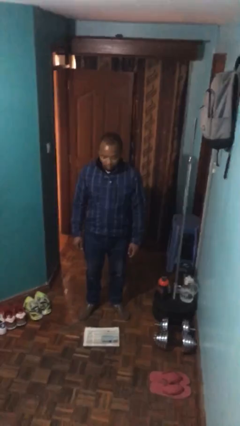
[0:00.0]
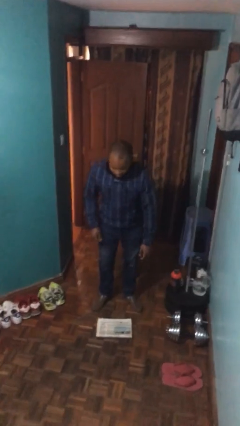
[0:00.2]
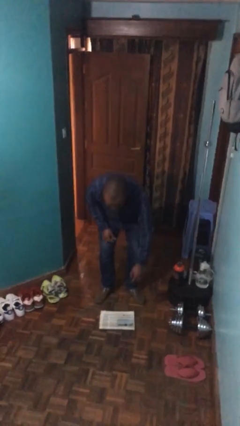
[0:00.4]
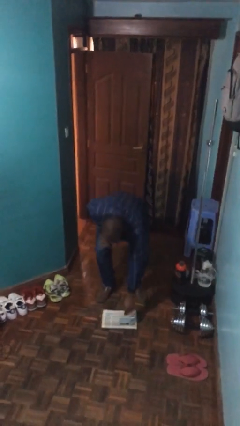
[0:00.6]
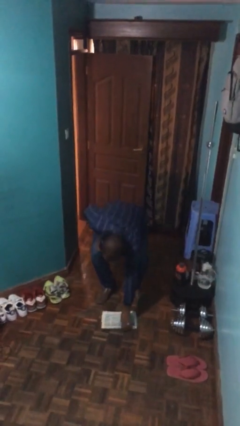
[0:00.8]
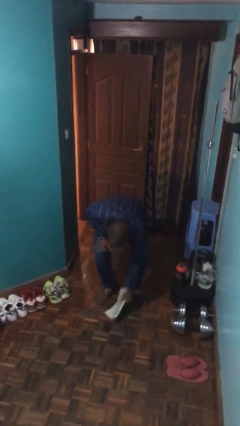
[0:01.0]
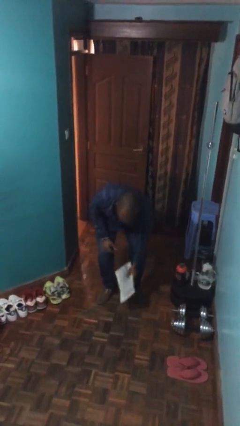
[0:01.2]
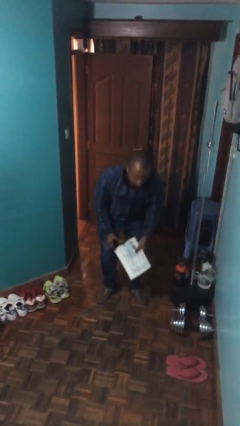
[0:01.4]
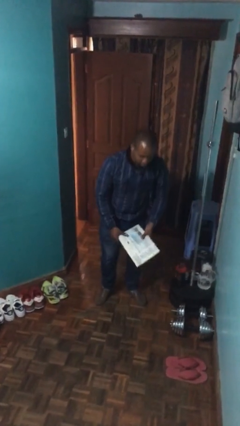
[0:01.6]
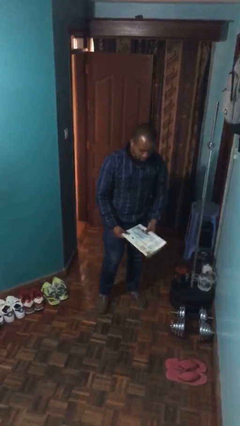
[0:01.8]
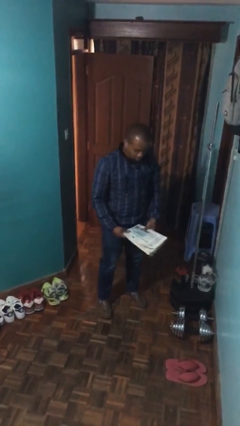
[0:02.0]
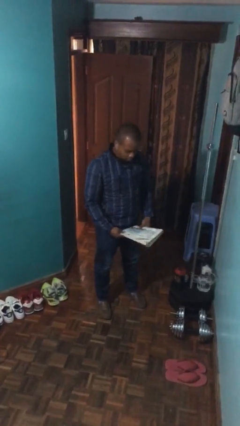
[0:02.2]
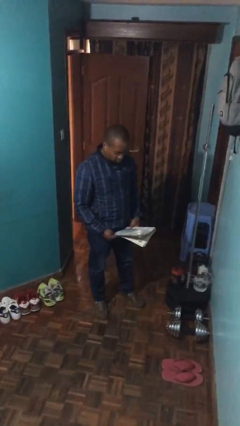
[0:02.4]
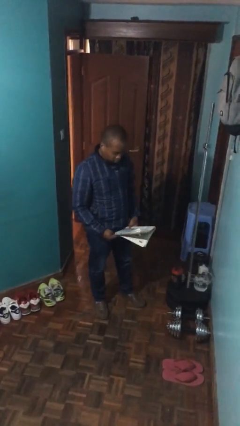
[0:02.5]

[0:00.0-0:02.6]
person picks up object from floor

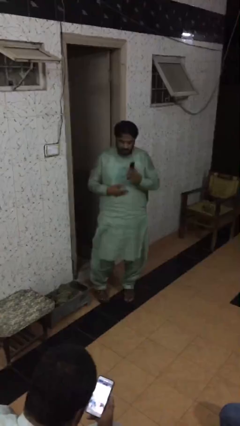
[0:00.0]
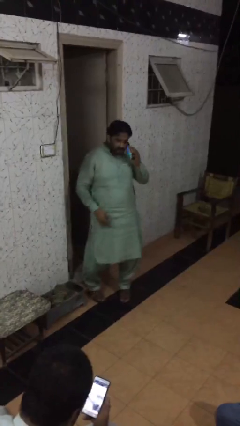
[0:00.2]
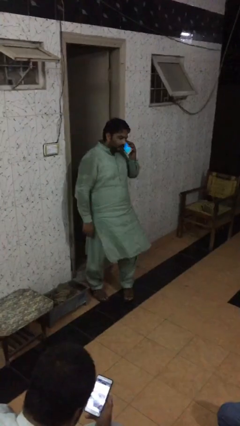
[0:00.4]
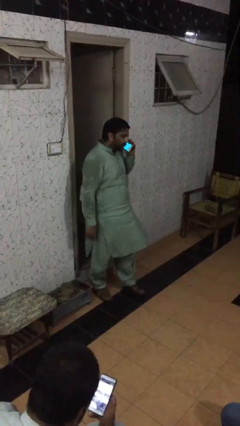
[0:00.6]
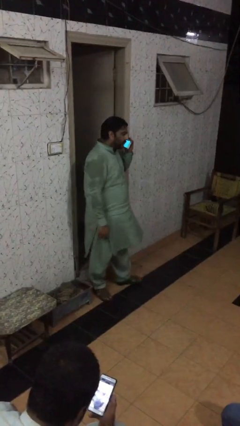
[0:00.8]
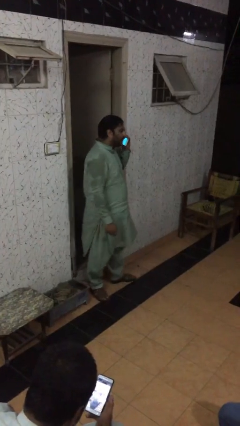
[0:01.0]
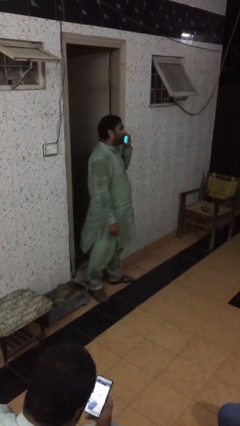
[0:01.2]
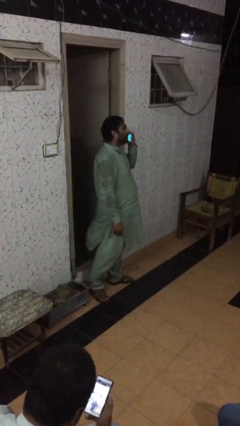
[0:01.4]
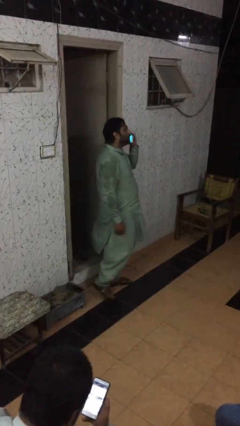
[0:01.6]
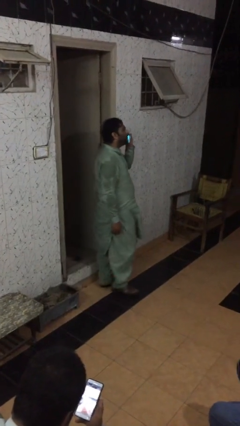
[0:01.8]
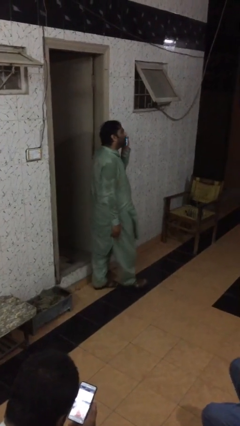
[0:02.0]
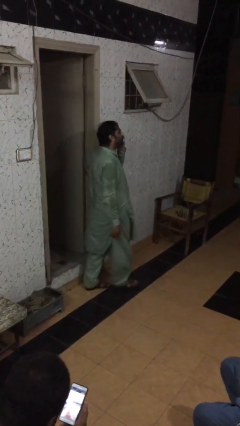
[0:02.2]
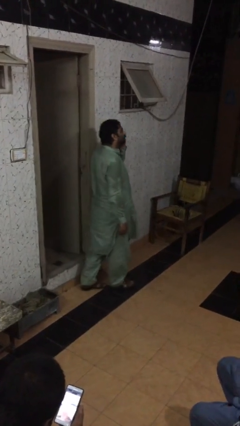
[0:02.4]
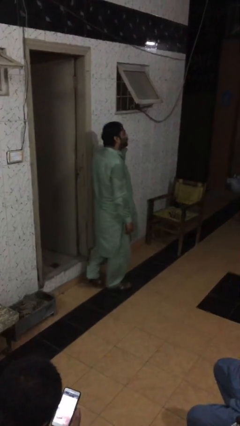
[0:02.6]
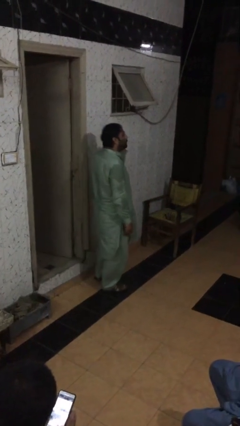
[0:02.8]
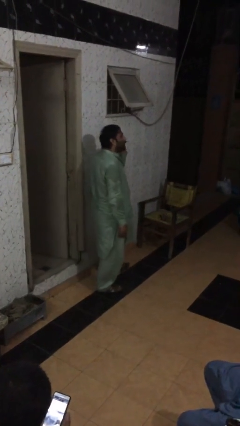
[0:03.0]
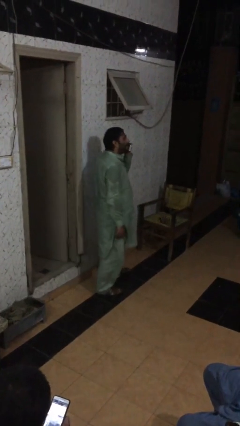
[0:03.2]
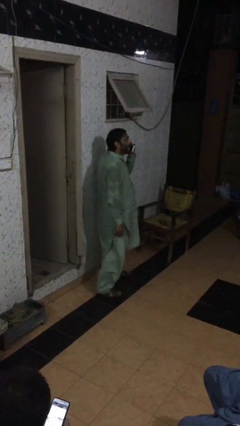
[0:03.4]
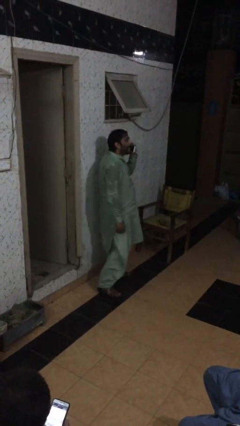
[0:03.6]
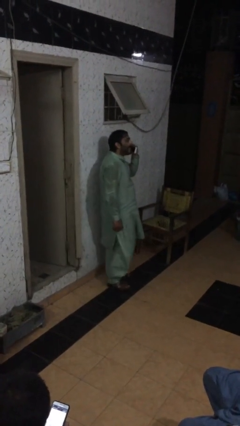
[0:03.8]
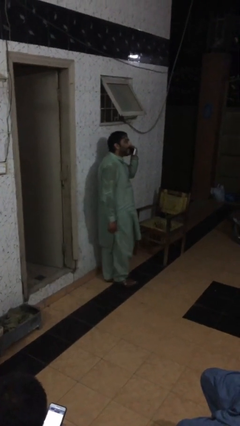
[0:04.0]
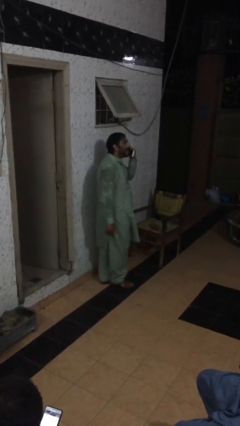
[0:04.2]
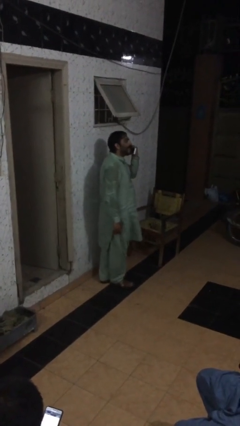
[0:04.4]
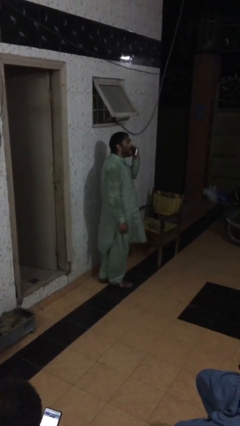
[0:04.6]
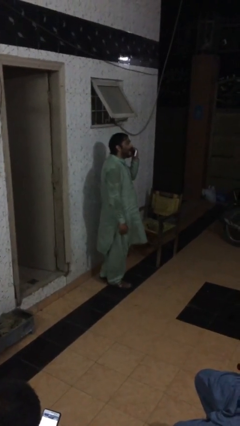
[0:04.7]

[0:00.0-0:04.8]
person talks on phone

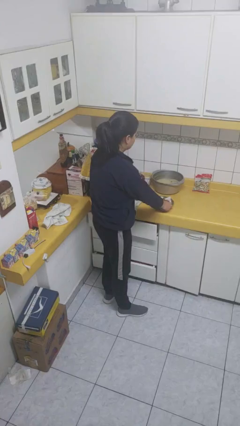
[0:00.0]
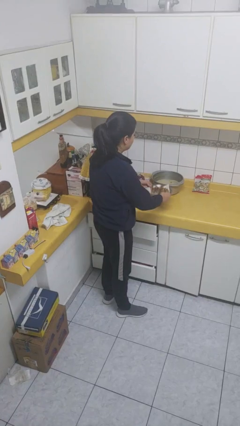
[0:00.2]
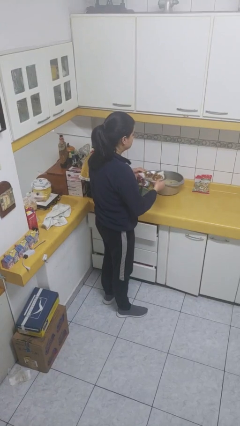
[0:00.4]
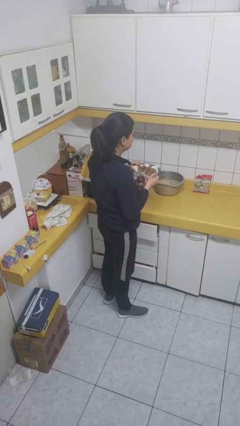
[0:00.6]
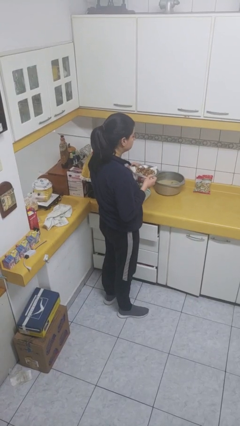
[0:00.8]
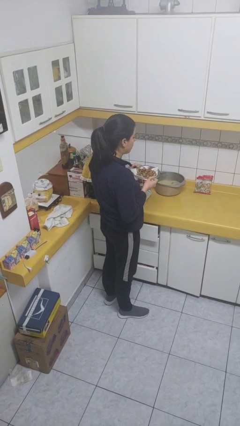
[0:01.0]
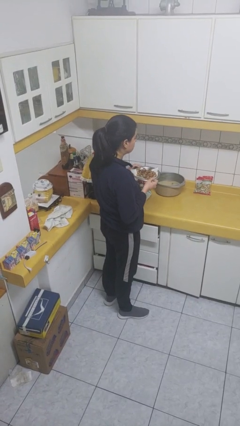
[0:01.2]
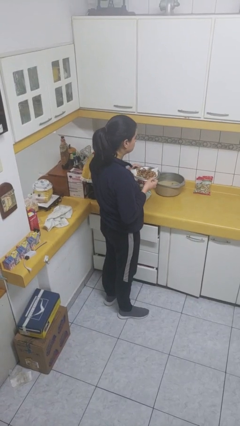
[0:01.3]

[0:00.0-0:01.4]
person picks up object from countertop

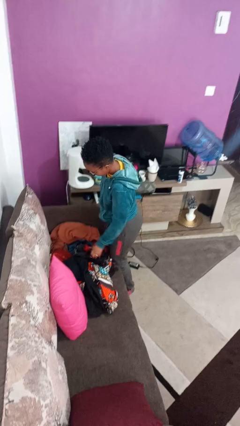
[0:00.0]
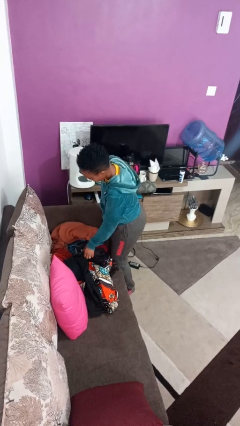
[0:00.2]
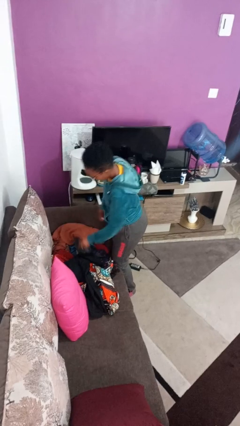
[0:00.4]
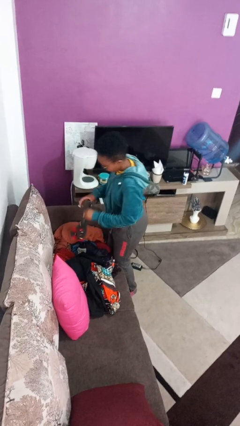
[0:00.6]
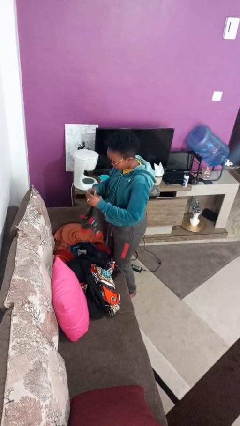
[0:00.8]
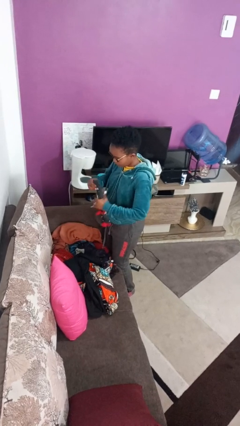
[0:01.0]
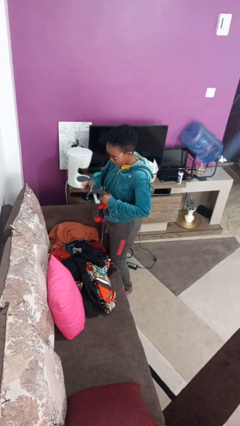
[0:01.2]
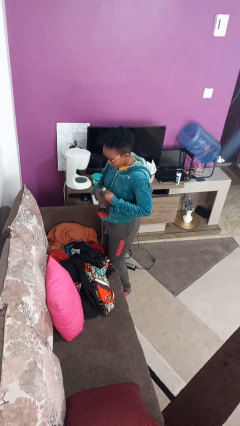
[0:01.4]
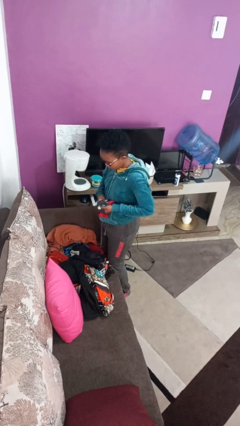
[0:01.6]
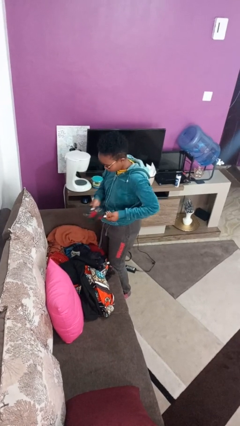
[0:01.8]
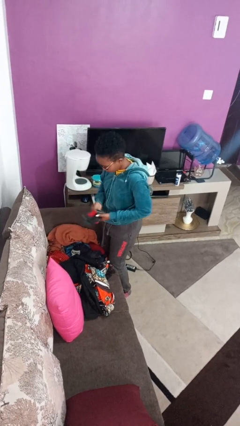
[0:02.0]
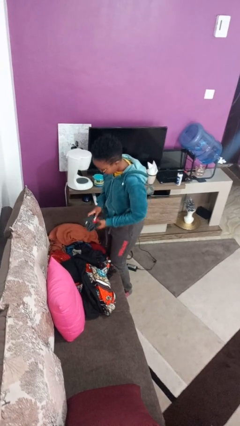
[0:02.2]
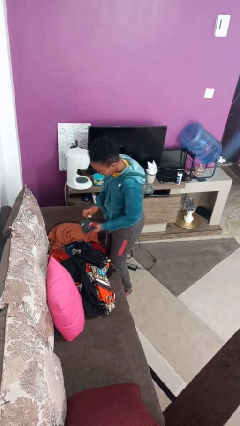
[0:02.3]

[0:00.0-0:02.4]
person folds socks

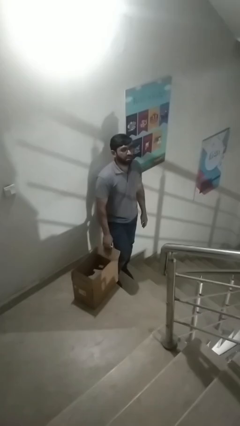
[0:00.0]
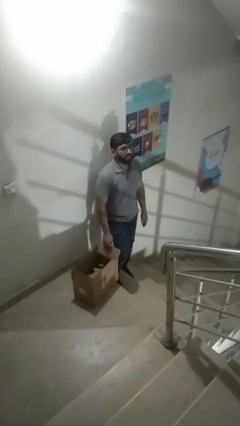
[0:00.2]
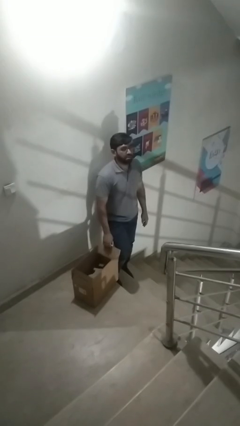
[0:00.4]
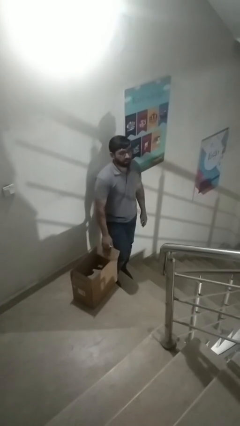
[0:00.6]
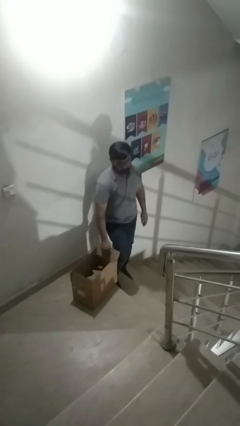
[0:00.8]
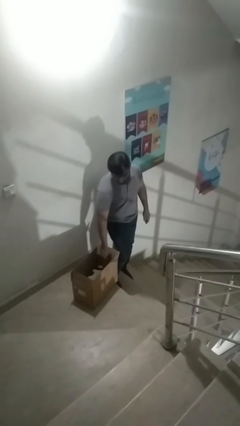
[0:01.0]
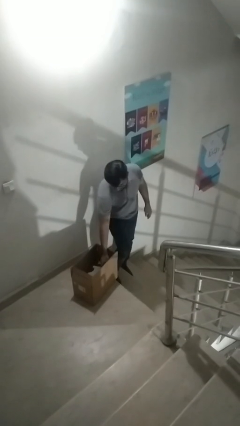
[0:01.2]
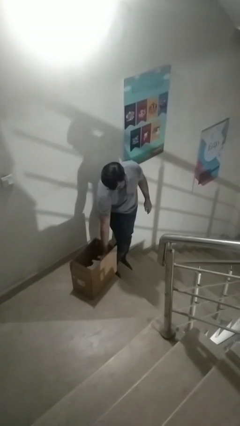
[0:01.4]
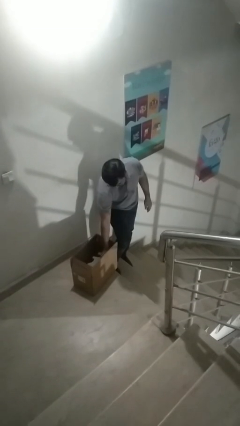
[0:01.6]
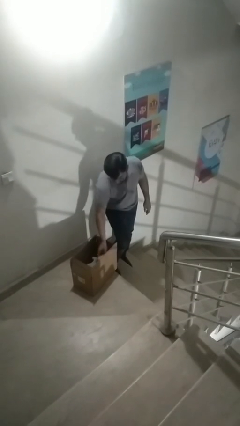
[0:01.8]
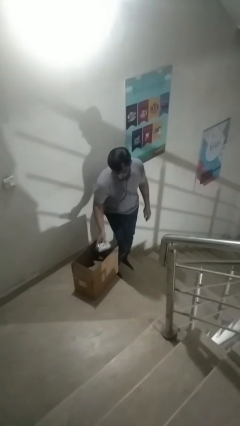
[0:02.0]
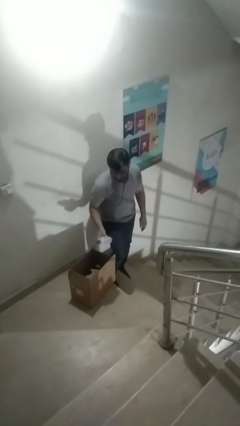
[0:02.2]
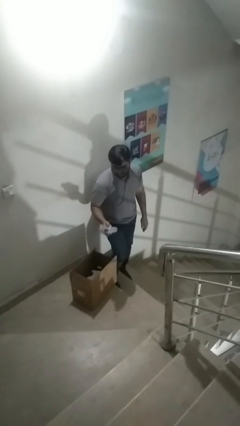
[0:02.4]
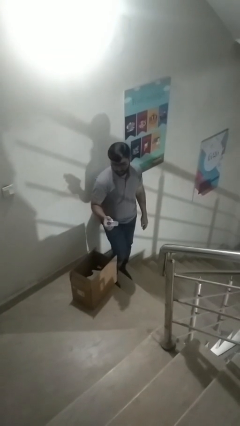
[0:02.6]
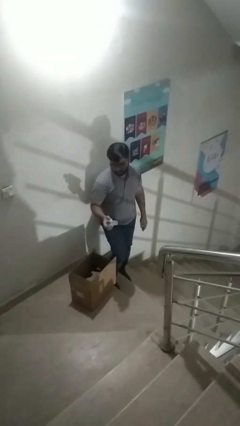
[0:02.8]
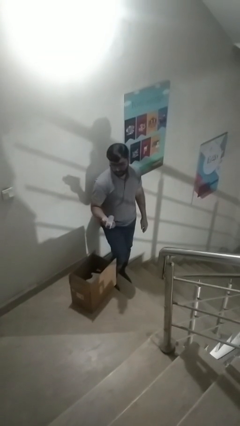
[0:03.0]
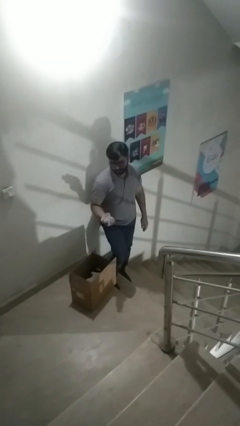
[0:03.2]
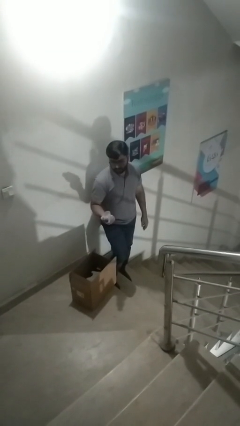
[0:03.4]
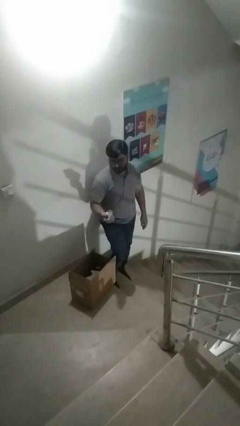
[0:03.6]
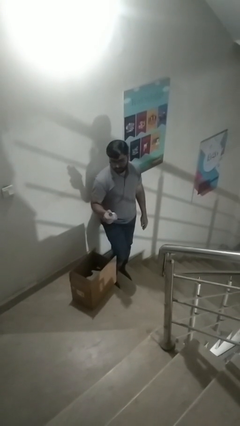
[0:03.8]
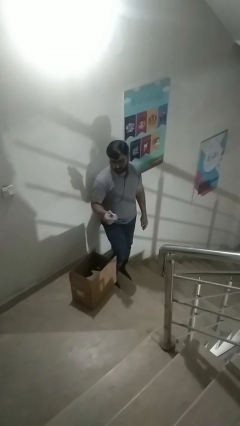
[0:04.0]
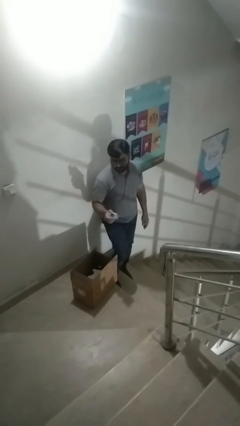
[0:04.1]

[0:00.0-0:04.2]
person takes object from box

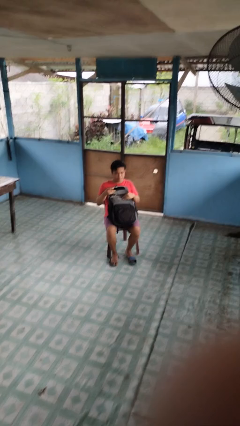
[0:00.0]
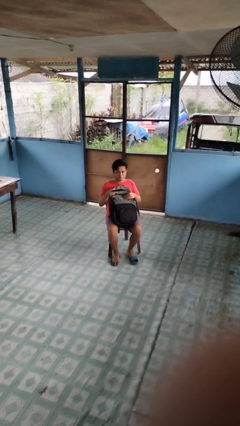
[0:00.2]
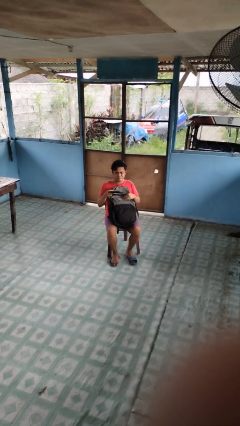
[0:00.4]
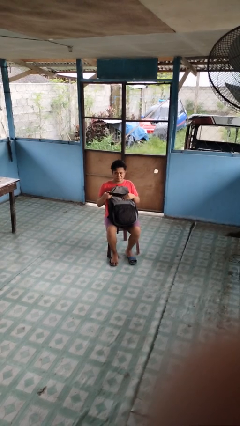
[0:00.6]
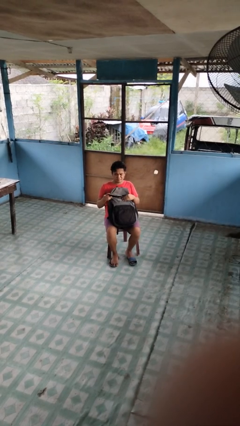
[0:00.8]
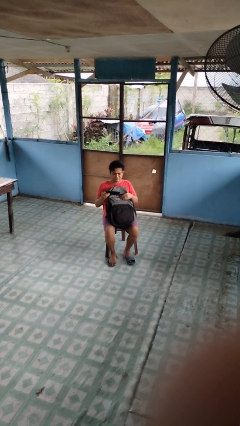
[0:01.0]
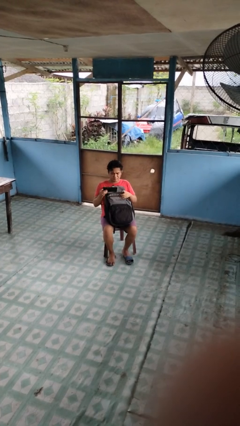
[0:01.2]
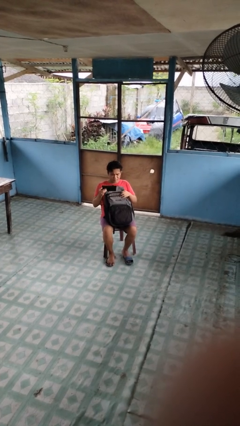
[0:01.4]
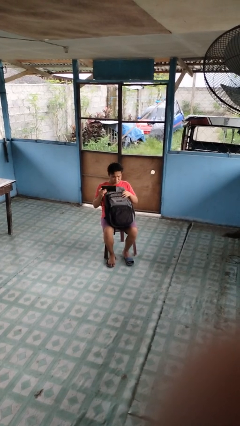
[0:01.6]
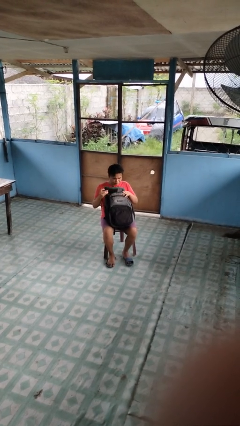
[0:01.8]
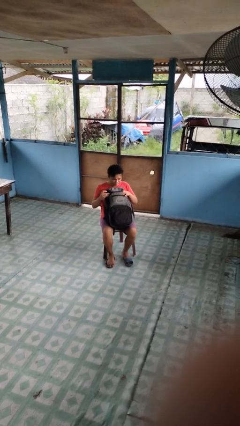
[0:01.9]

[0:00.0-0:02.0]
person takes object from backpack
